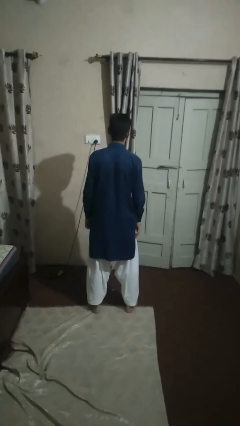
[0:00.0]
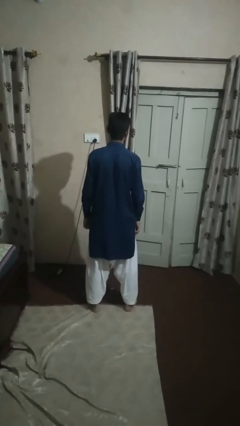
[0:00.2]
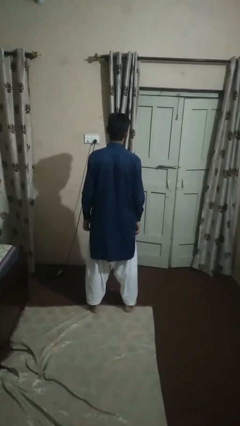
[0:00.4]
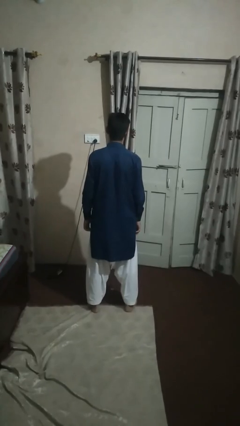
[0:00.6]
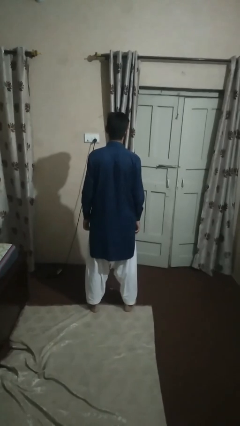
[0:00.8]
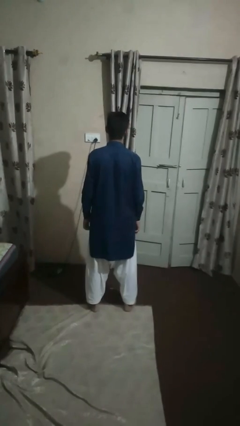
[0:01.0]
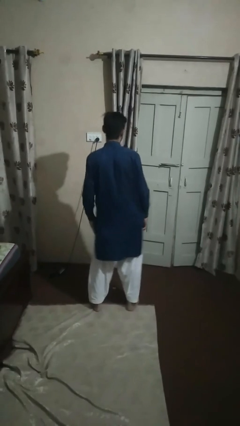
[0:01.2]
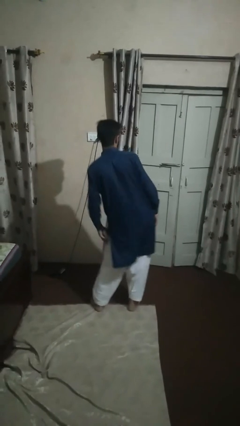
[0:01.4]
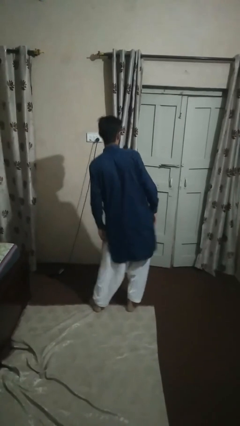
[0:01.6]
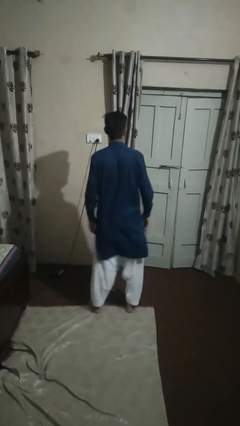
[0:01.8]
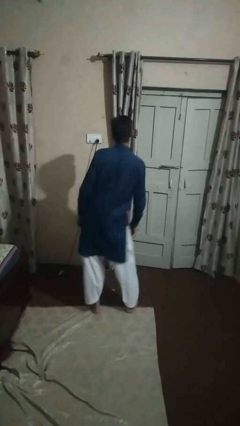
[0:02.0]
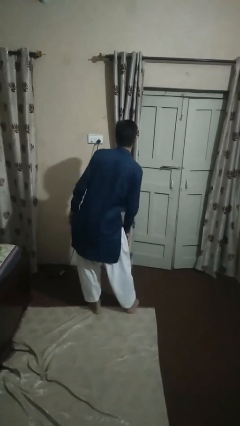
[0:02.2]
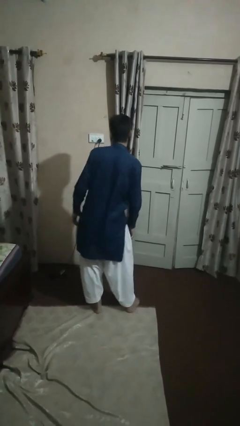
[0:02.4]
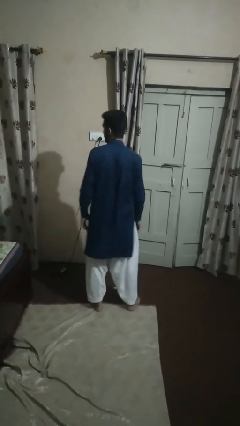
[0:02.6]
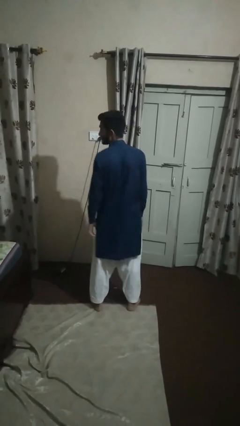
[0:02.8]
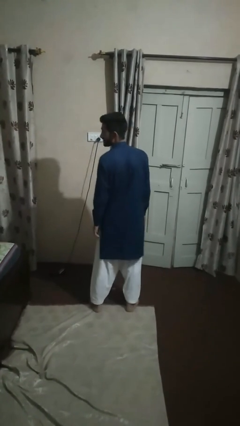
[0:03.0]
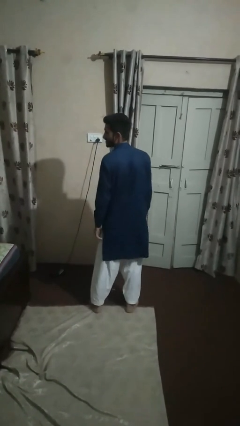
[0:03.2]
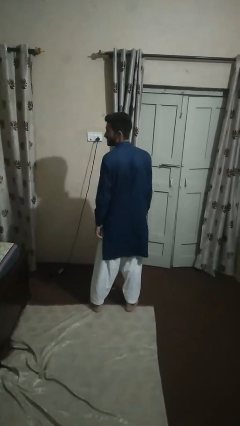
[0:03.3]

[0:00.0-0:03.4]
person wiggles hips

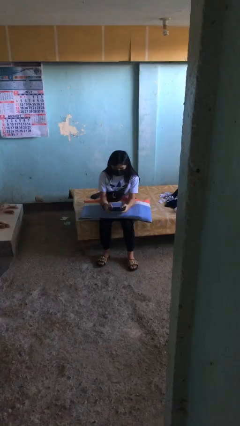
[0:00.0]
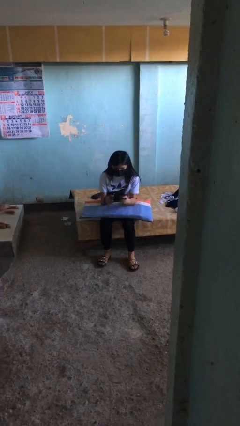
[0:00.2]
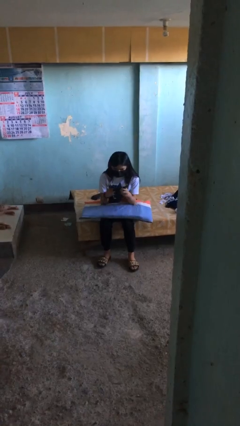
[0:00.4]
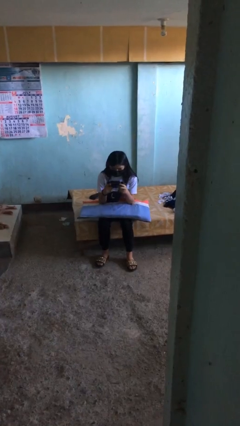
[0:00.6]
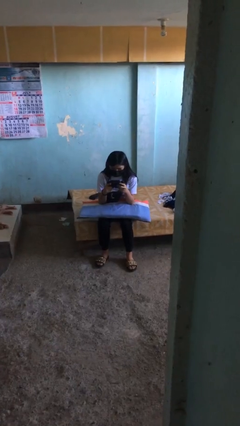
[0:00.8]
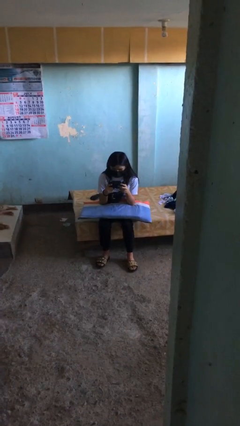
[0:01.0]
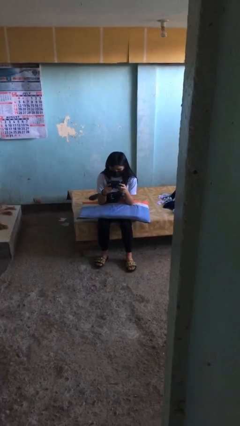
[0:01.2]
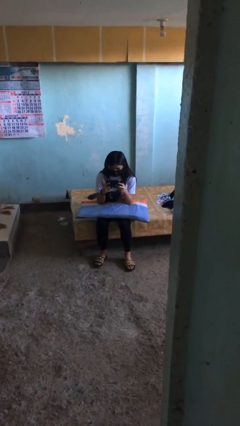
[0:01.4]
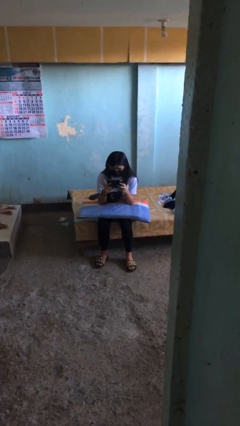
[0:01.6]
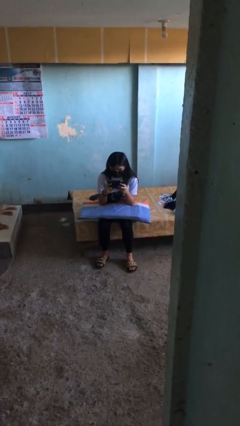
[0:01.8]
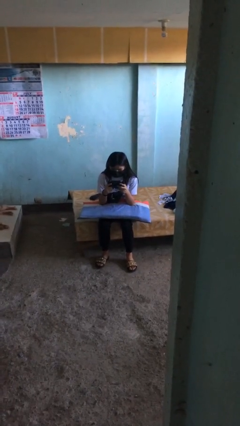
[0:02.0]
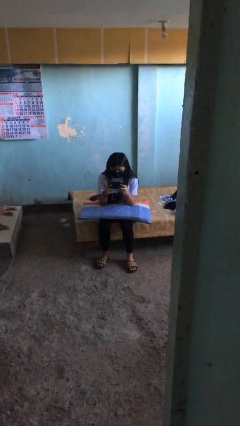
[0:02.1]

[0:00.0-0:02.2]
person interacts with handheld game

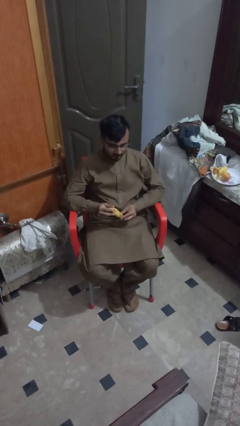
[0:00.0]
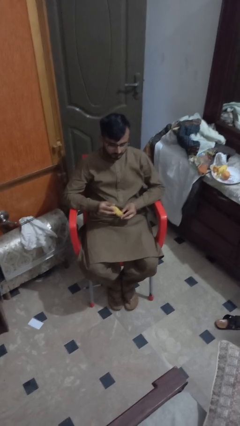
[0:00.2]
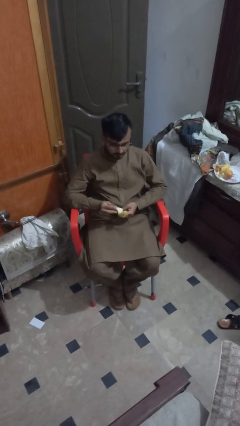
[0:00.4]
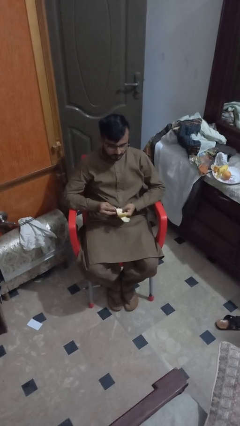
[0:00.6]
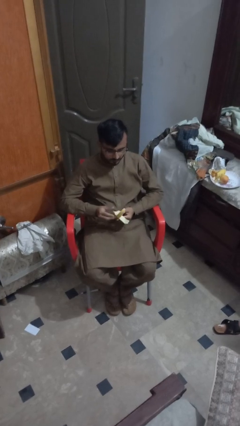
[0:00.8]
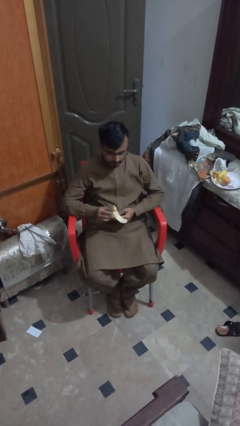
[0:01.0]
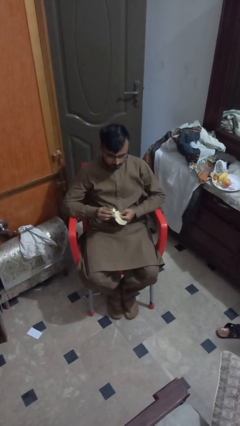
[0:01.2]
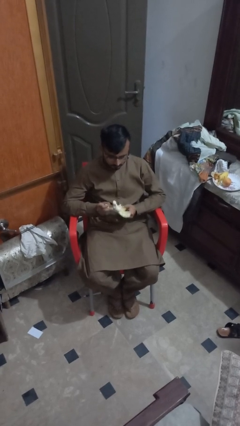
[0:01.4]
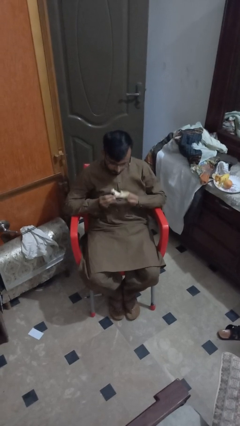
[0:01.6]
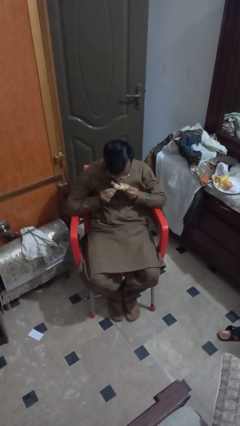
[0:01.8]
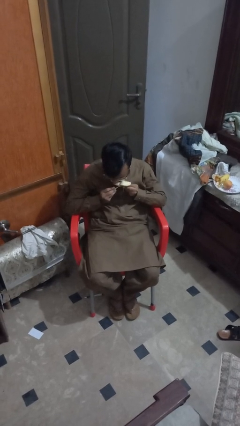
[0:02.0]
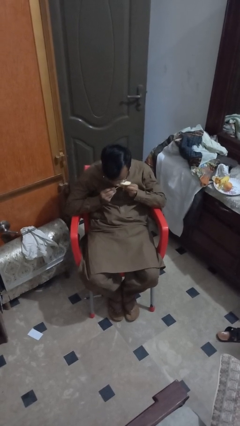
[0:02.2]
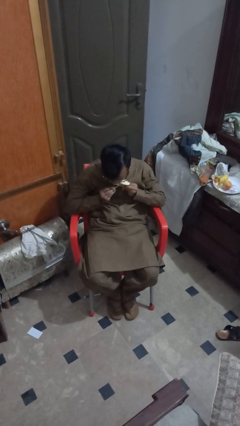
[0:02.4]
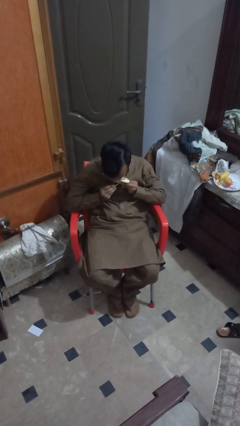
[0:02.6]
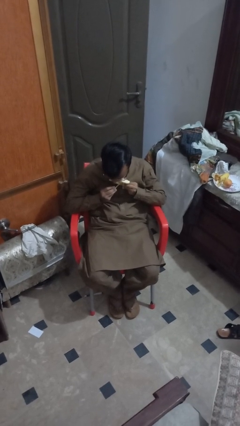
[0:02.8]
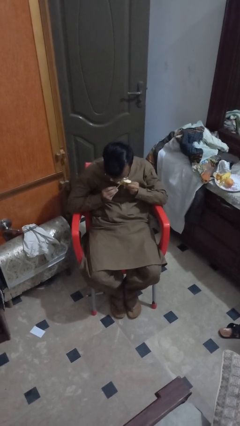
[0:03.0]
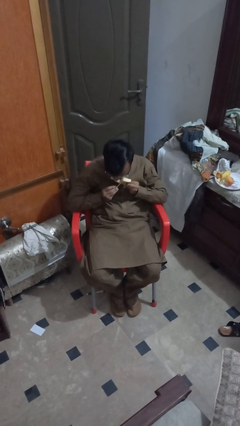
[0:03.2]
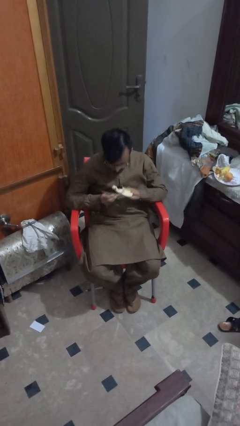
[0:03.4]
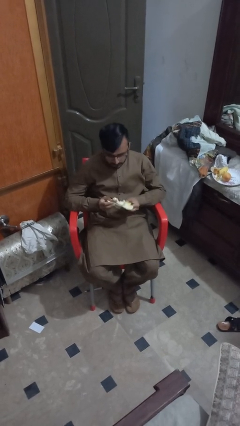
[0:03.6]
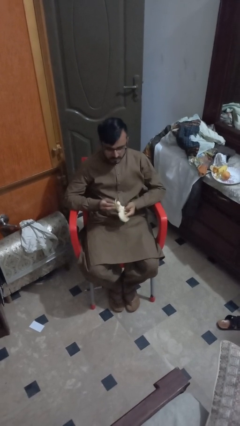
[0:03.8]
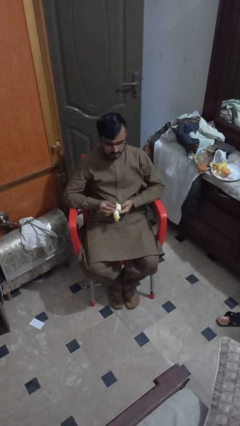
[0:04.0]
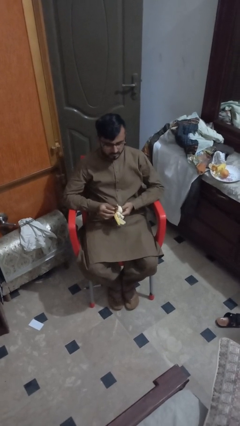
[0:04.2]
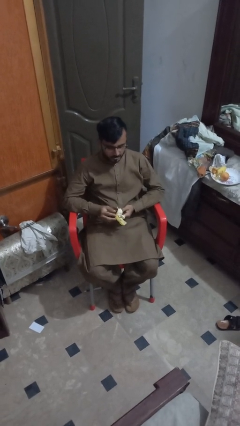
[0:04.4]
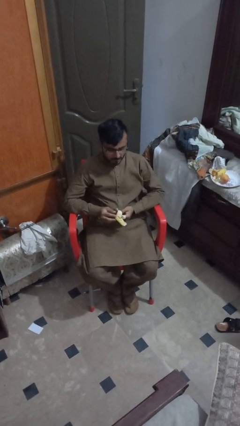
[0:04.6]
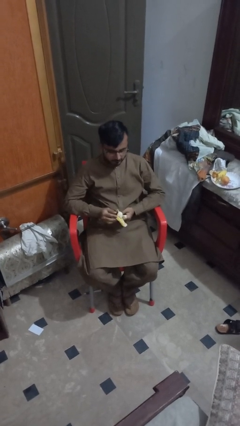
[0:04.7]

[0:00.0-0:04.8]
person eats banana

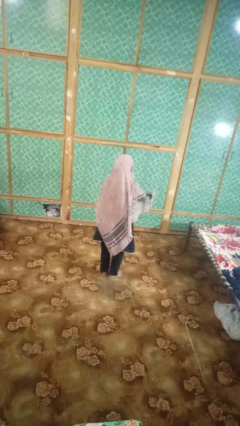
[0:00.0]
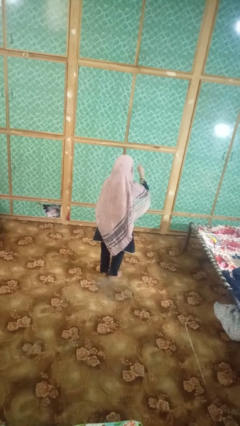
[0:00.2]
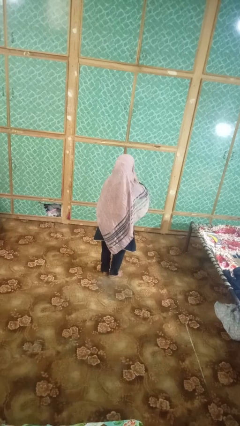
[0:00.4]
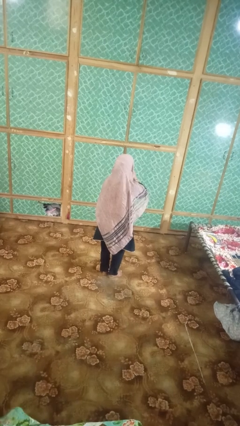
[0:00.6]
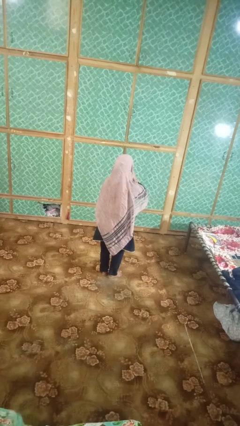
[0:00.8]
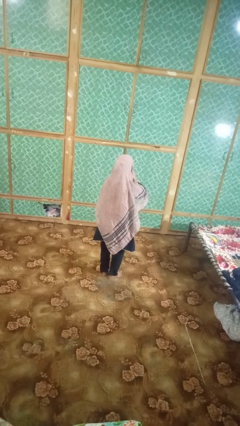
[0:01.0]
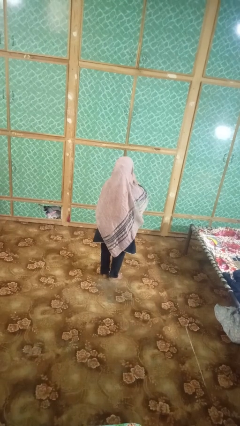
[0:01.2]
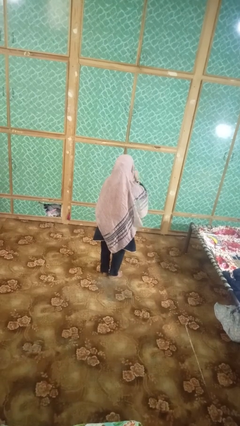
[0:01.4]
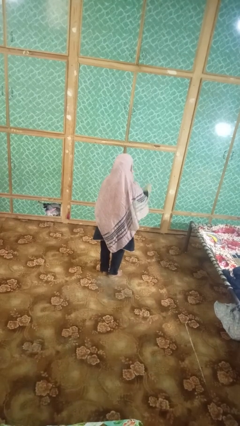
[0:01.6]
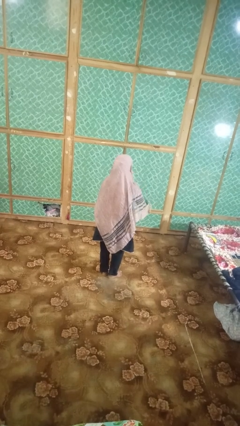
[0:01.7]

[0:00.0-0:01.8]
person gestures be quiet

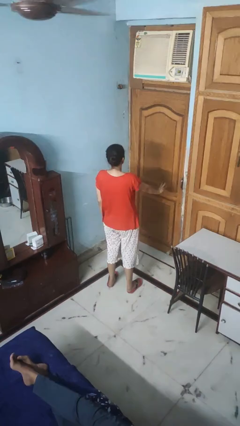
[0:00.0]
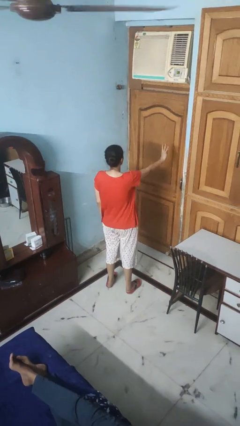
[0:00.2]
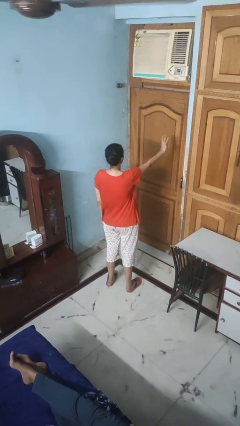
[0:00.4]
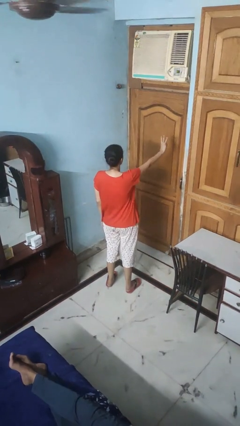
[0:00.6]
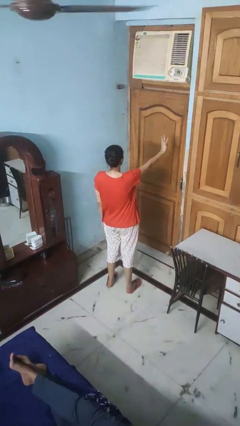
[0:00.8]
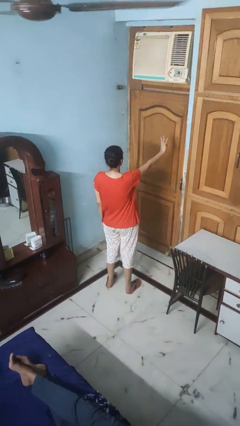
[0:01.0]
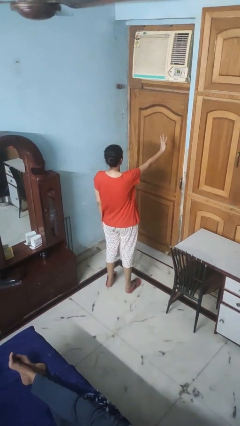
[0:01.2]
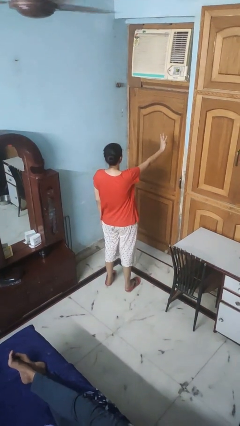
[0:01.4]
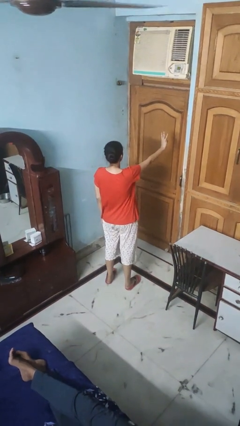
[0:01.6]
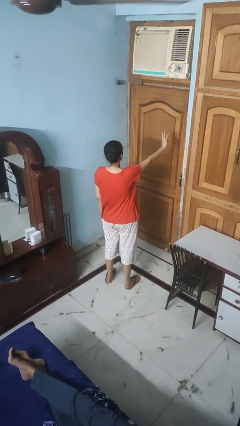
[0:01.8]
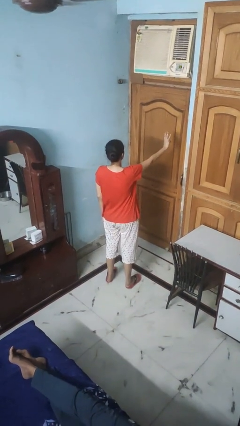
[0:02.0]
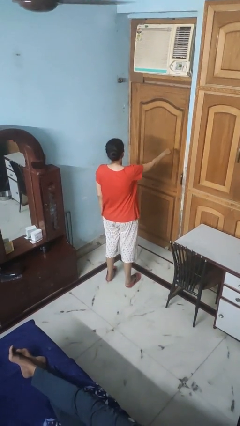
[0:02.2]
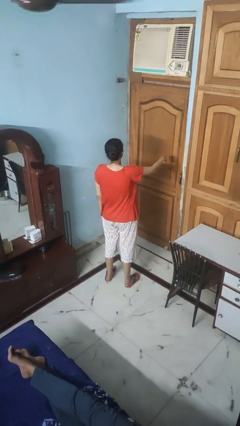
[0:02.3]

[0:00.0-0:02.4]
person gestures number three

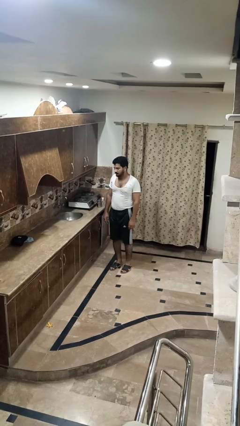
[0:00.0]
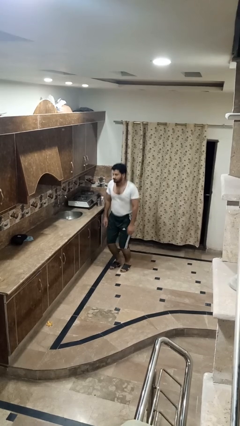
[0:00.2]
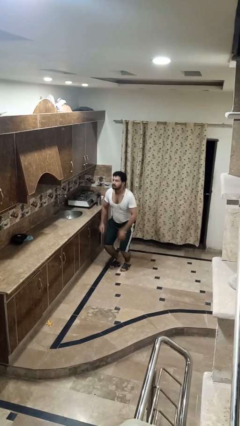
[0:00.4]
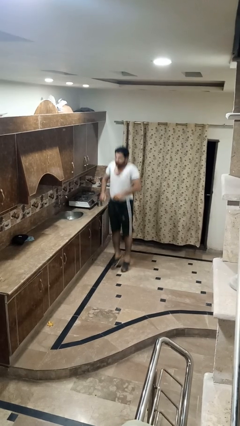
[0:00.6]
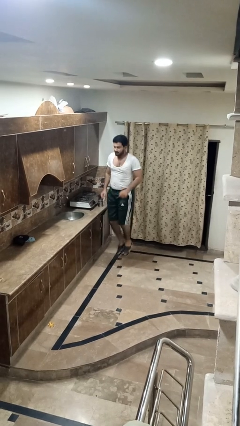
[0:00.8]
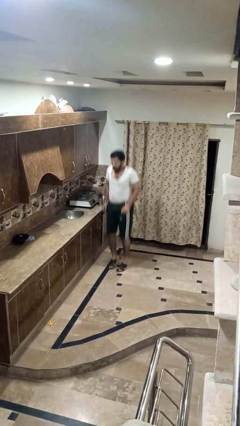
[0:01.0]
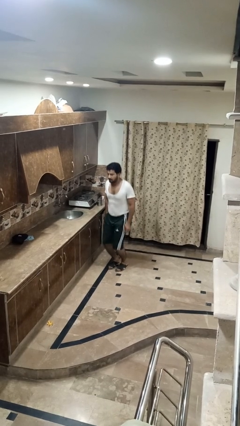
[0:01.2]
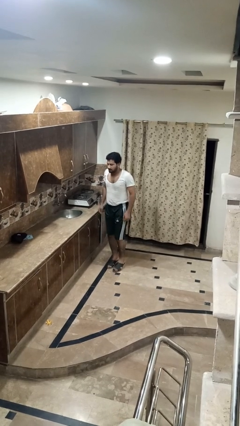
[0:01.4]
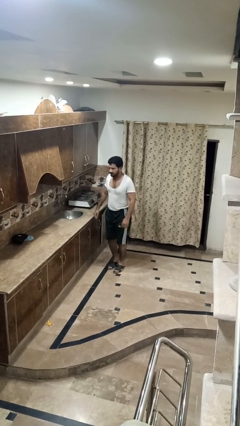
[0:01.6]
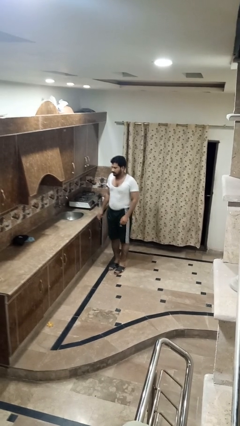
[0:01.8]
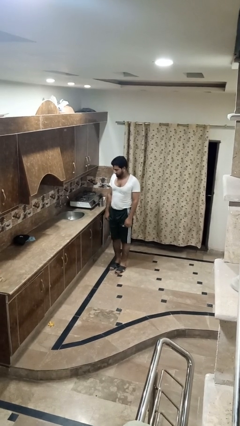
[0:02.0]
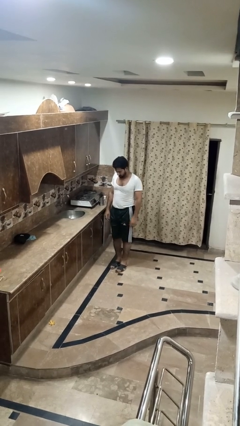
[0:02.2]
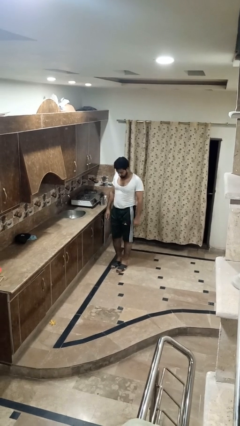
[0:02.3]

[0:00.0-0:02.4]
person jumps

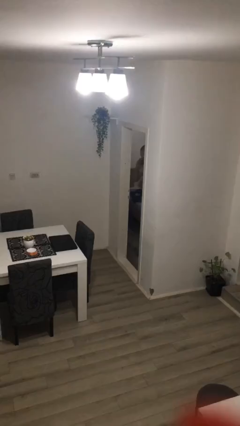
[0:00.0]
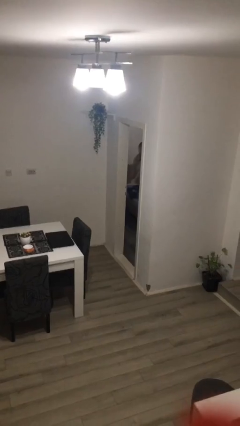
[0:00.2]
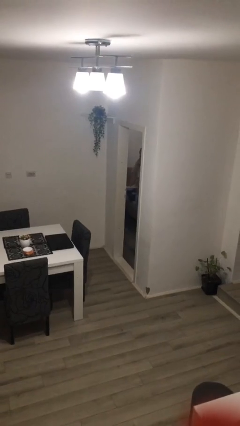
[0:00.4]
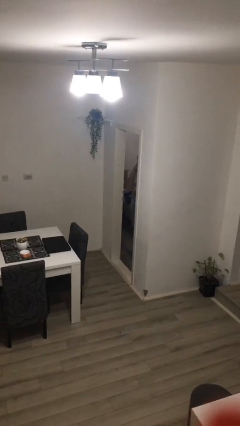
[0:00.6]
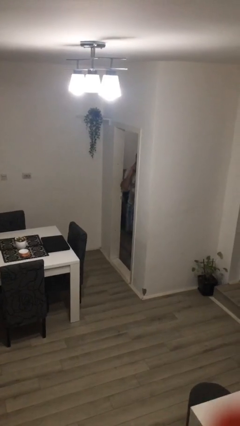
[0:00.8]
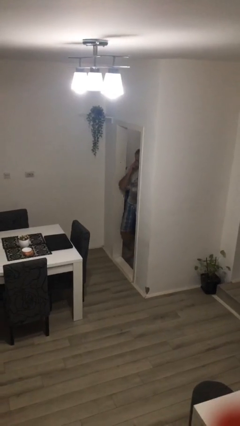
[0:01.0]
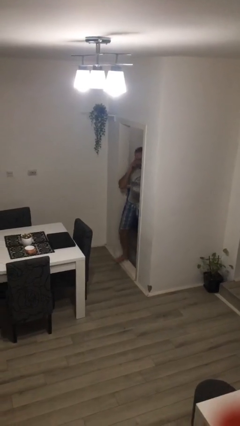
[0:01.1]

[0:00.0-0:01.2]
person opens facility door
